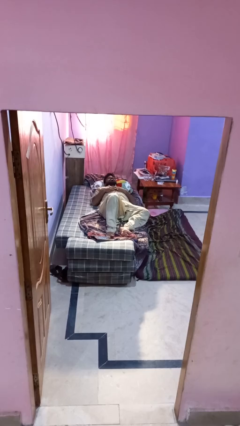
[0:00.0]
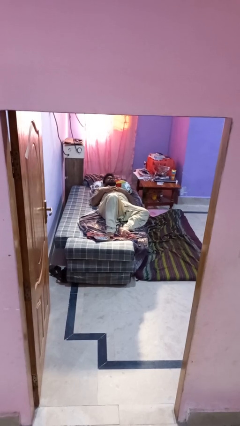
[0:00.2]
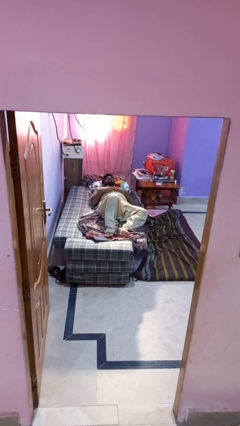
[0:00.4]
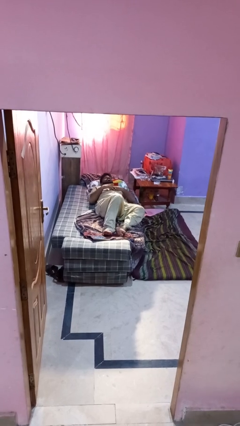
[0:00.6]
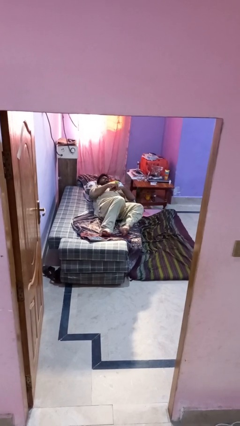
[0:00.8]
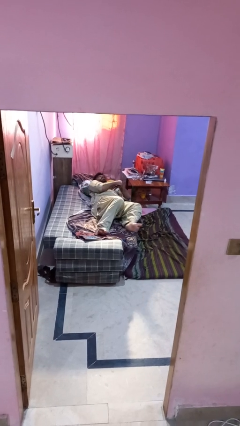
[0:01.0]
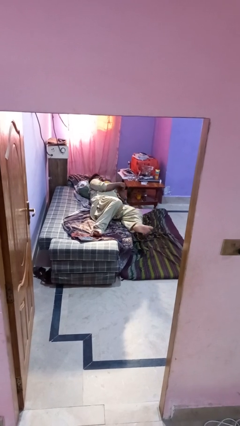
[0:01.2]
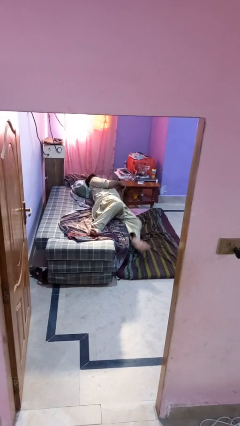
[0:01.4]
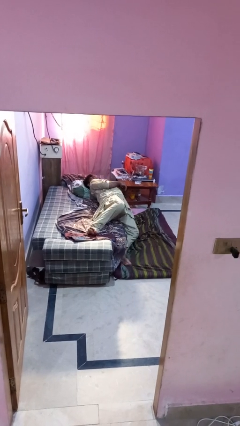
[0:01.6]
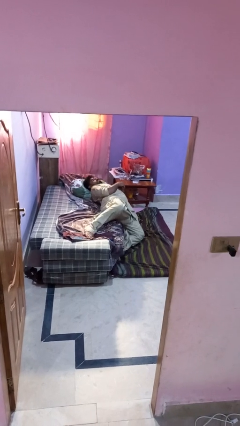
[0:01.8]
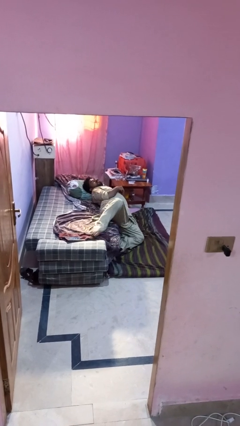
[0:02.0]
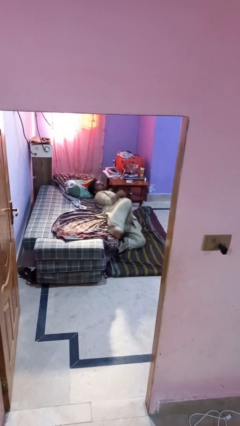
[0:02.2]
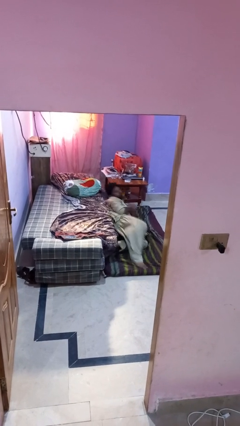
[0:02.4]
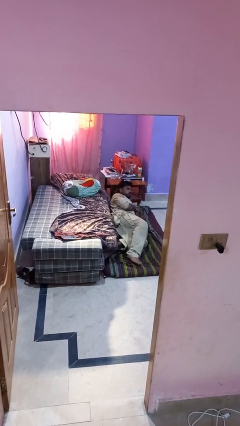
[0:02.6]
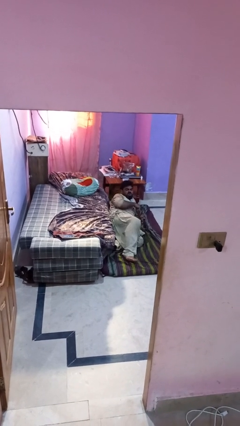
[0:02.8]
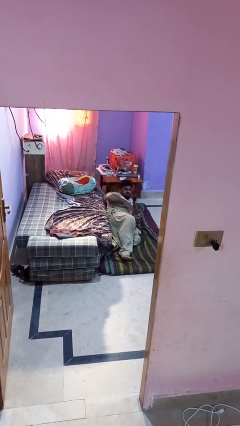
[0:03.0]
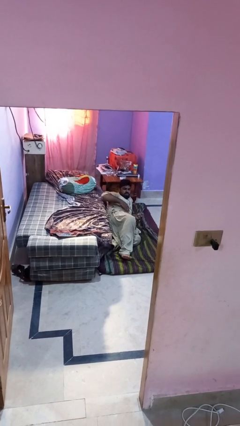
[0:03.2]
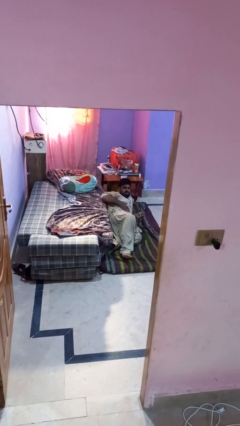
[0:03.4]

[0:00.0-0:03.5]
person falls from bed

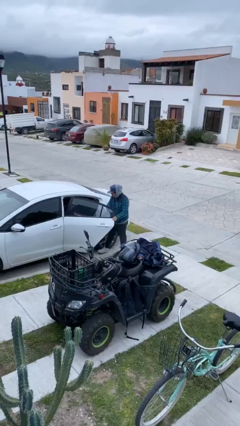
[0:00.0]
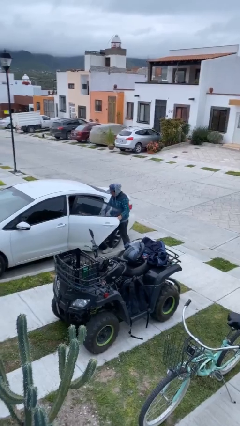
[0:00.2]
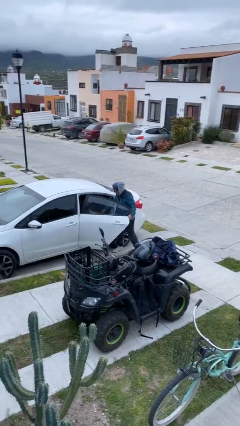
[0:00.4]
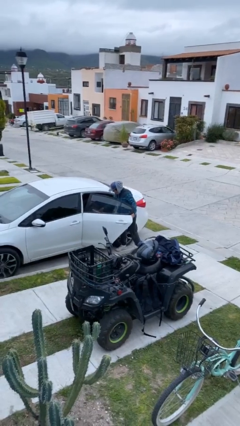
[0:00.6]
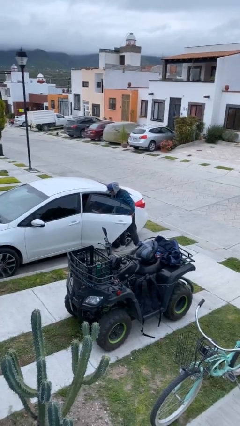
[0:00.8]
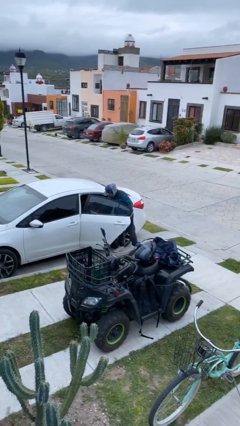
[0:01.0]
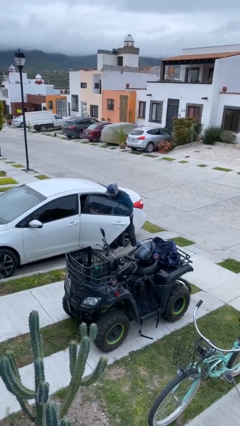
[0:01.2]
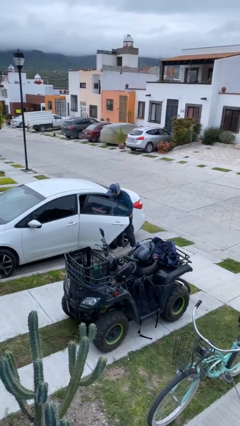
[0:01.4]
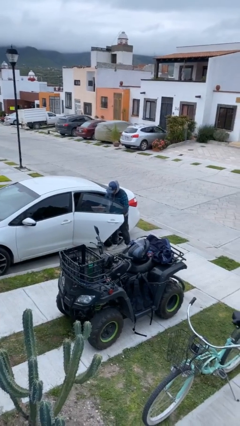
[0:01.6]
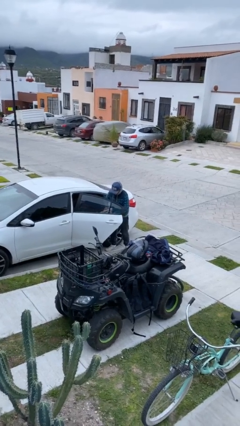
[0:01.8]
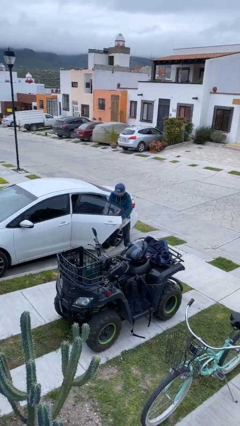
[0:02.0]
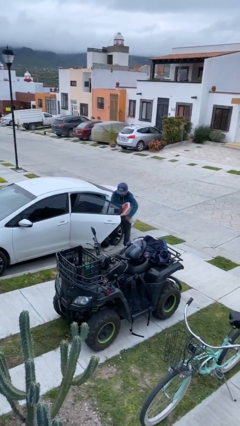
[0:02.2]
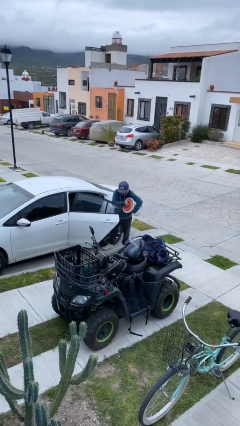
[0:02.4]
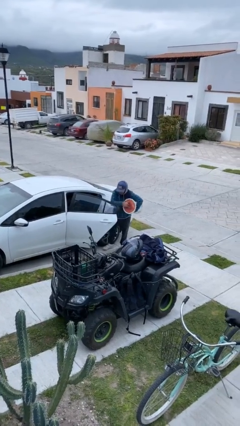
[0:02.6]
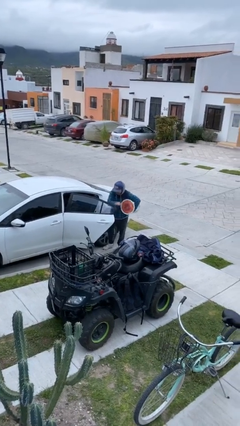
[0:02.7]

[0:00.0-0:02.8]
person unloads car

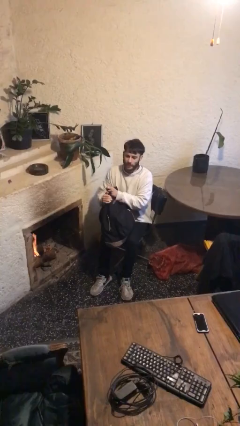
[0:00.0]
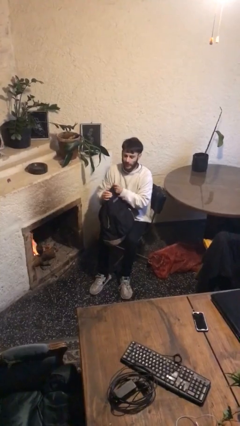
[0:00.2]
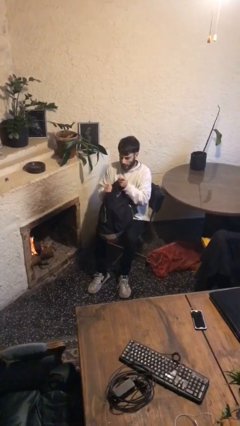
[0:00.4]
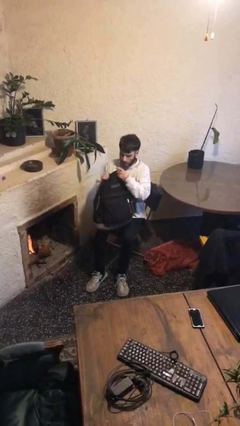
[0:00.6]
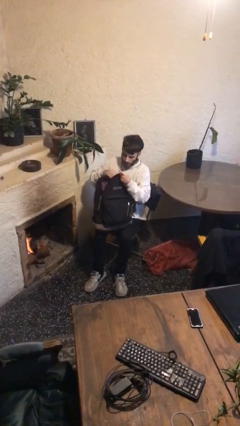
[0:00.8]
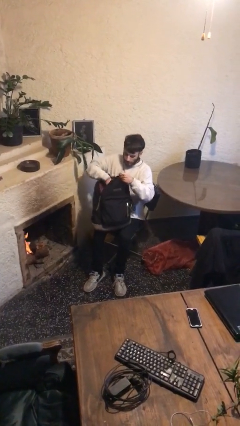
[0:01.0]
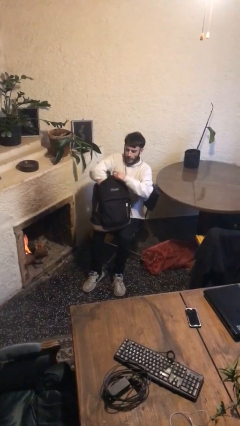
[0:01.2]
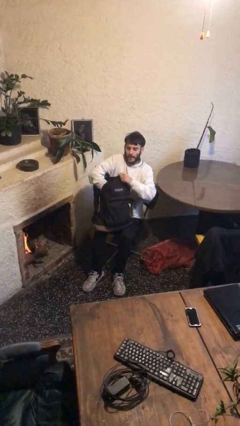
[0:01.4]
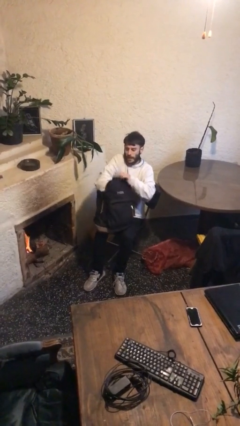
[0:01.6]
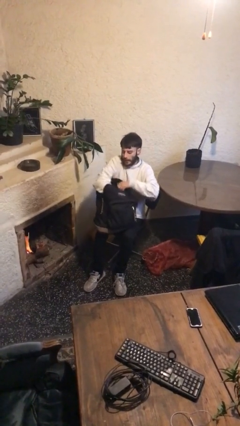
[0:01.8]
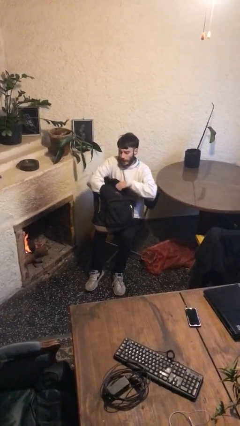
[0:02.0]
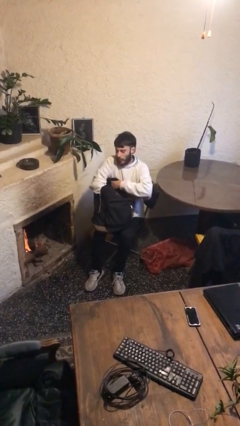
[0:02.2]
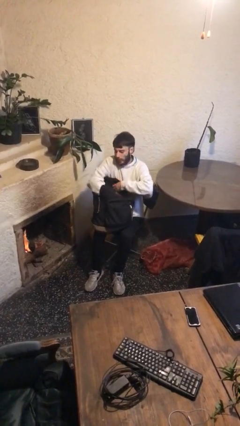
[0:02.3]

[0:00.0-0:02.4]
person searches in backpack

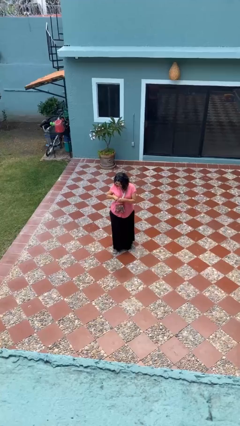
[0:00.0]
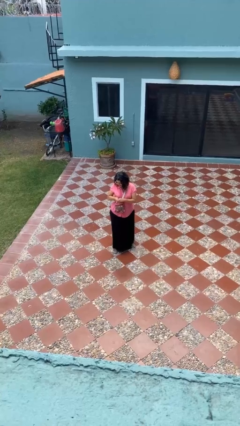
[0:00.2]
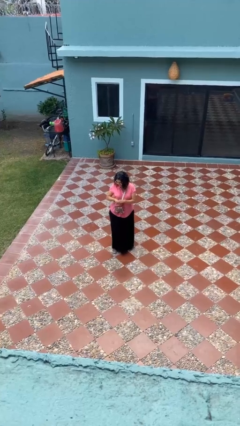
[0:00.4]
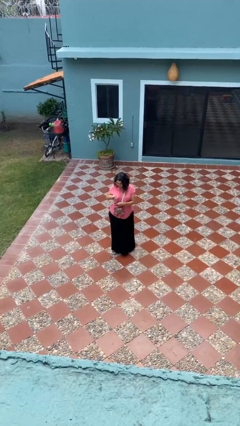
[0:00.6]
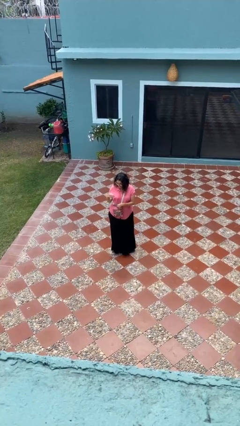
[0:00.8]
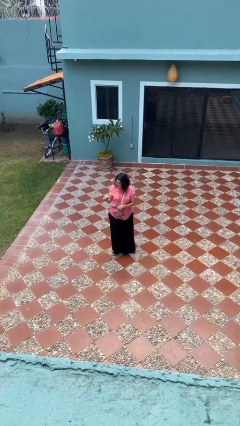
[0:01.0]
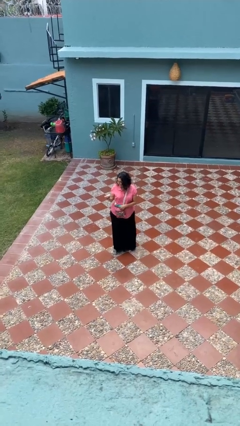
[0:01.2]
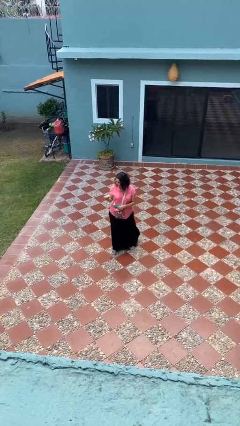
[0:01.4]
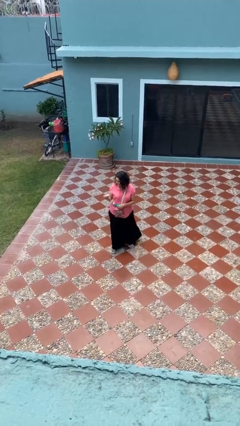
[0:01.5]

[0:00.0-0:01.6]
person takes object from purse

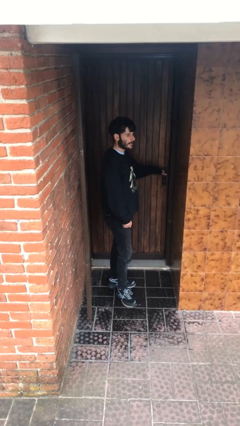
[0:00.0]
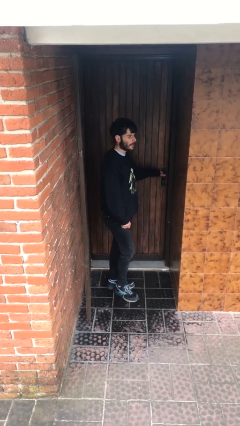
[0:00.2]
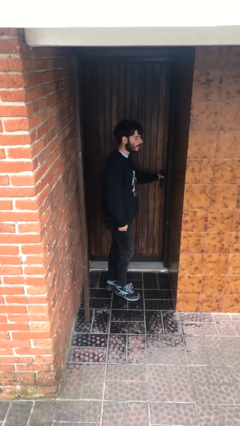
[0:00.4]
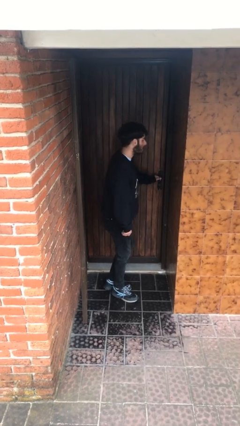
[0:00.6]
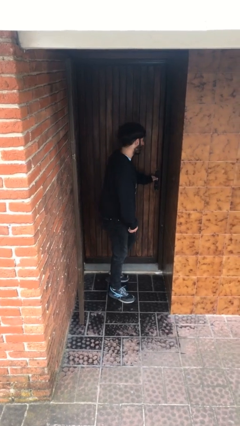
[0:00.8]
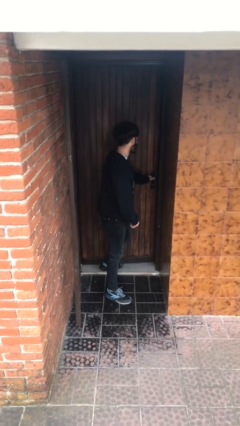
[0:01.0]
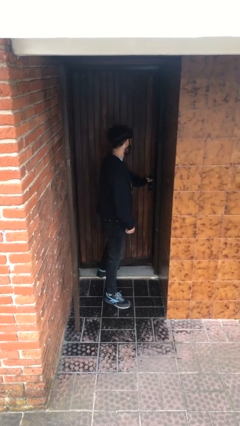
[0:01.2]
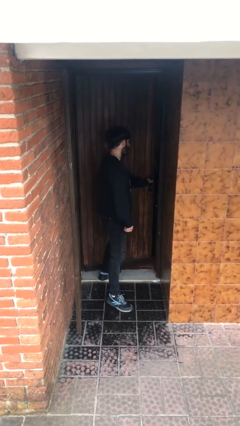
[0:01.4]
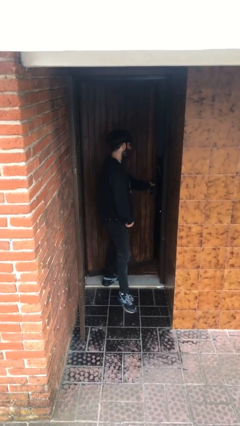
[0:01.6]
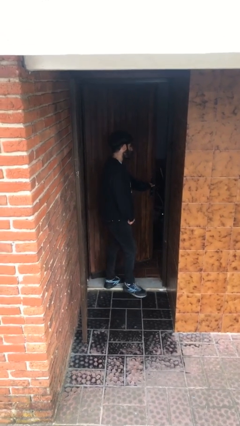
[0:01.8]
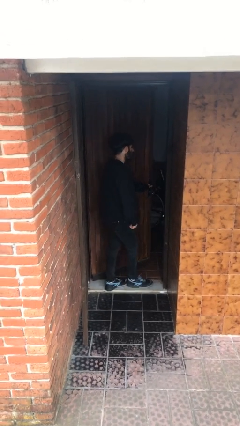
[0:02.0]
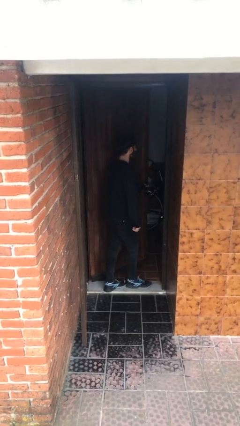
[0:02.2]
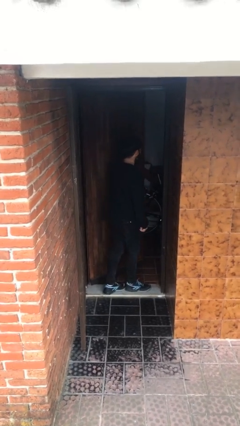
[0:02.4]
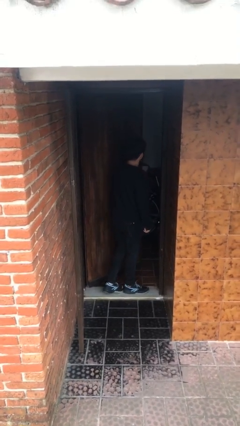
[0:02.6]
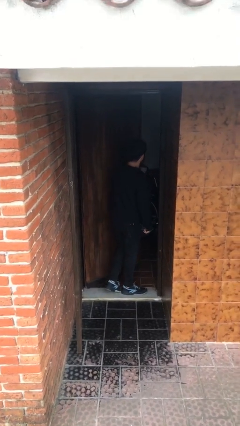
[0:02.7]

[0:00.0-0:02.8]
person opens facility door

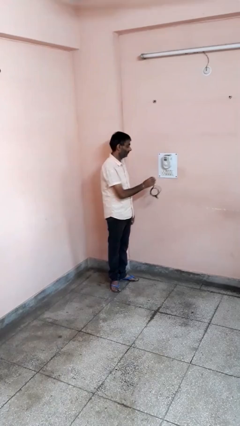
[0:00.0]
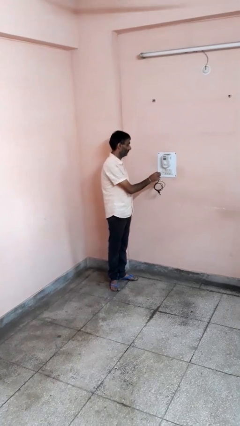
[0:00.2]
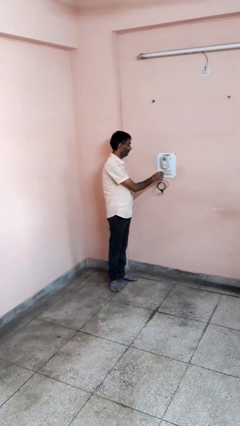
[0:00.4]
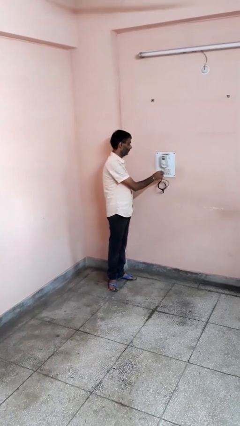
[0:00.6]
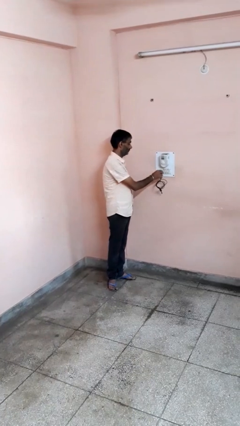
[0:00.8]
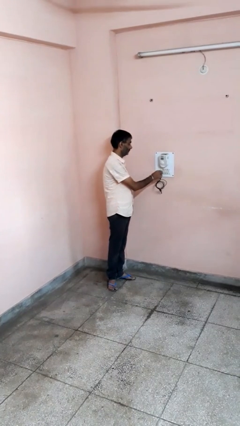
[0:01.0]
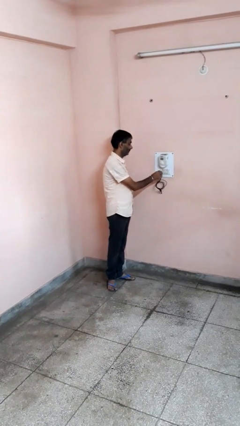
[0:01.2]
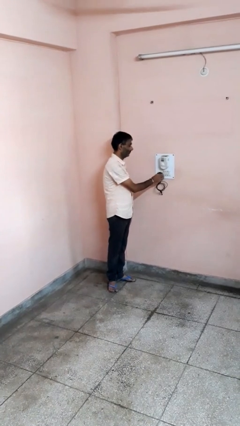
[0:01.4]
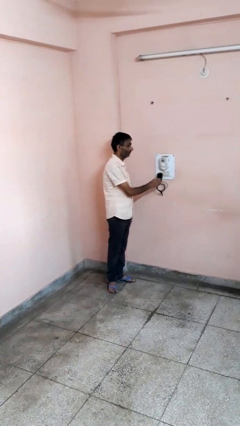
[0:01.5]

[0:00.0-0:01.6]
person plugs into electrical socket

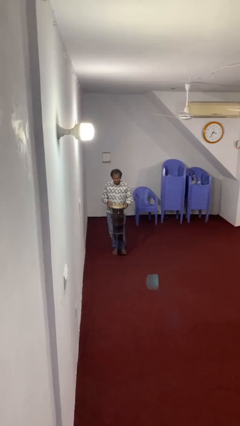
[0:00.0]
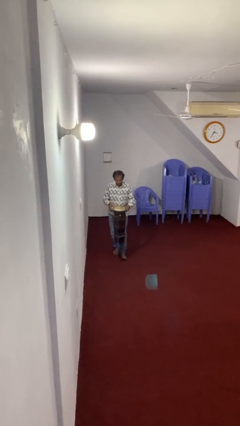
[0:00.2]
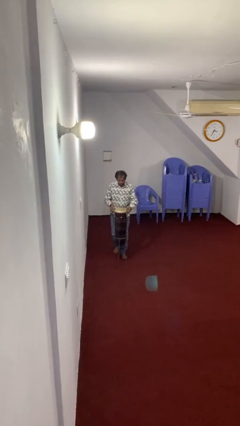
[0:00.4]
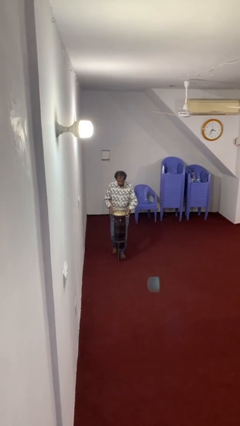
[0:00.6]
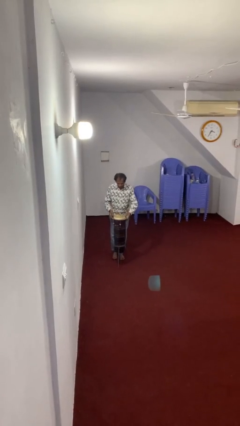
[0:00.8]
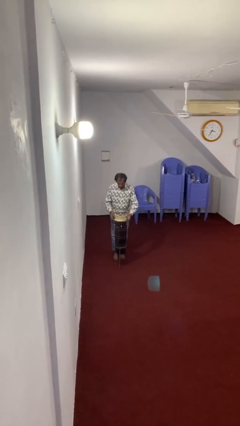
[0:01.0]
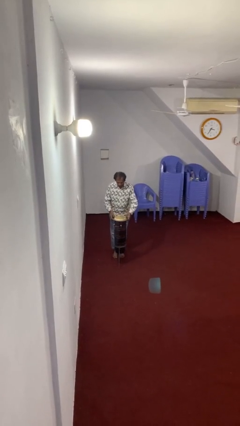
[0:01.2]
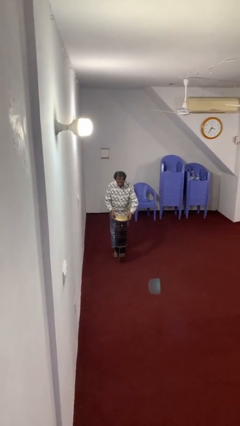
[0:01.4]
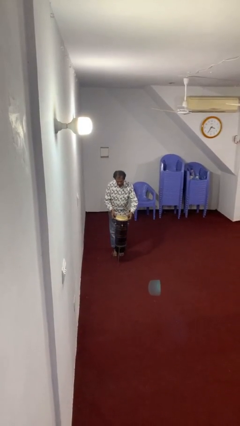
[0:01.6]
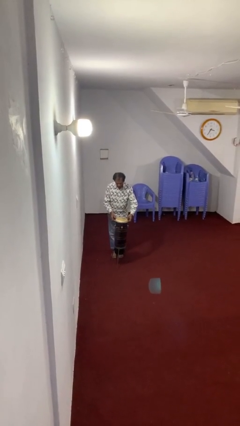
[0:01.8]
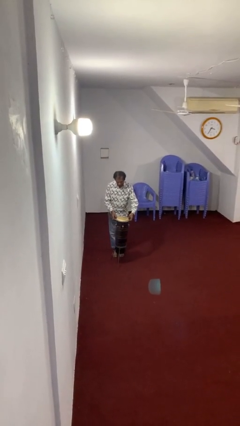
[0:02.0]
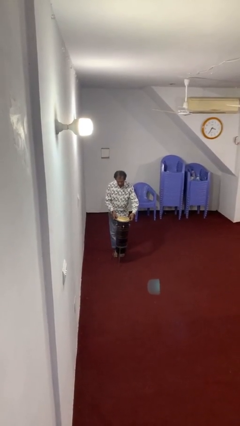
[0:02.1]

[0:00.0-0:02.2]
person puts down object on floor
